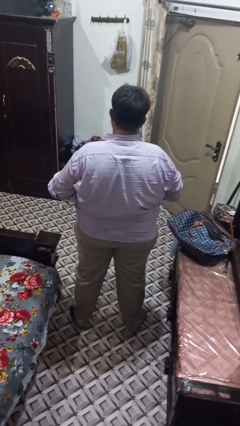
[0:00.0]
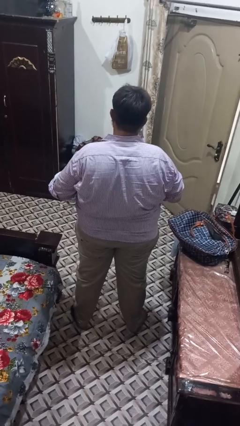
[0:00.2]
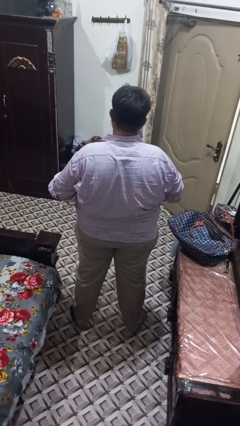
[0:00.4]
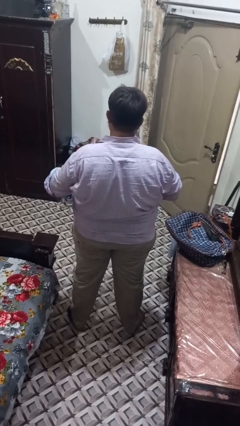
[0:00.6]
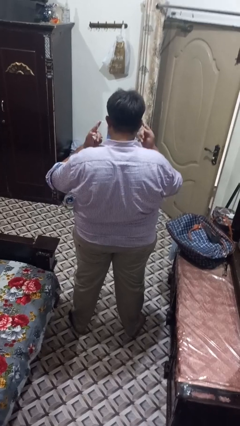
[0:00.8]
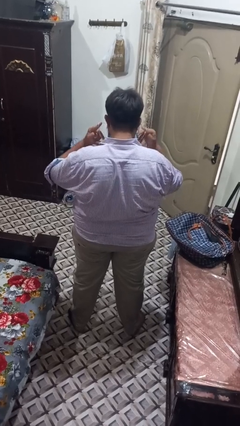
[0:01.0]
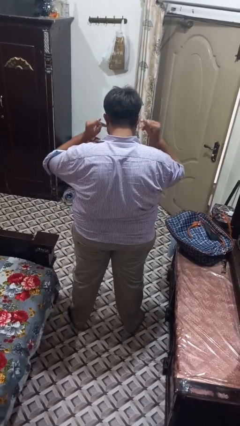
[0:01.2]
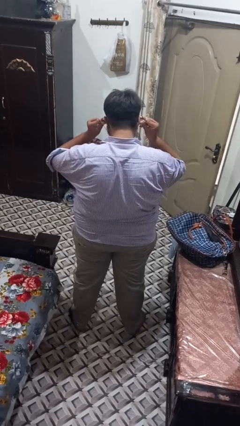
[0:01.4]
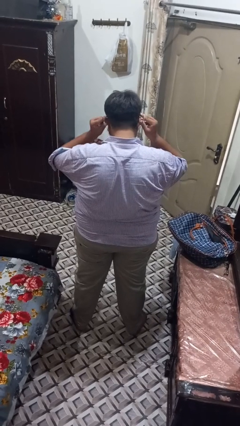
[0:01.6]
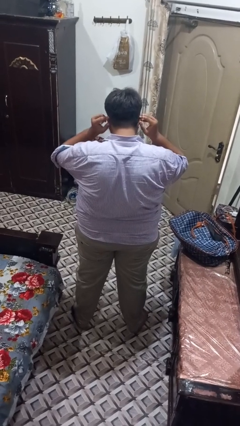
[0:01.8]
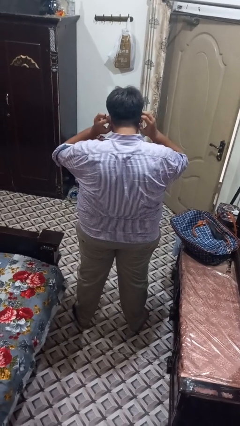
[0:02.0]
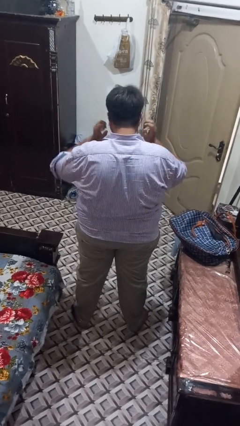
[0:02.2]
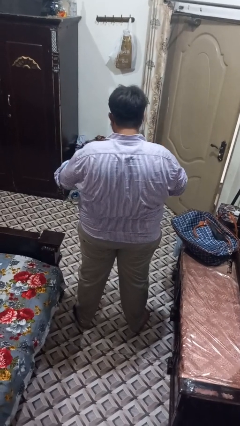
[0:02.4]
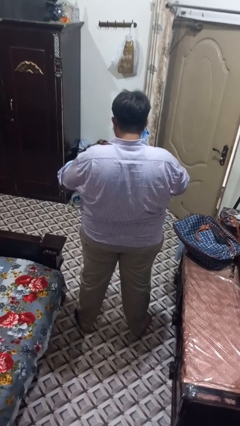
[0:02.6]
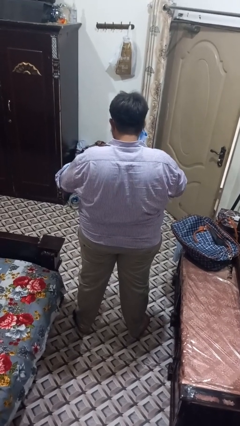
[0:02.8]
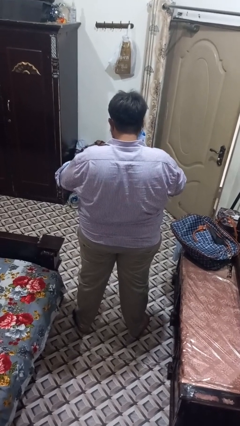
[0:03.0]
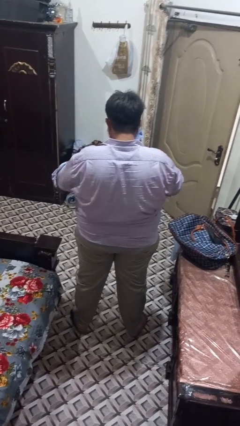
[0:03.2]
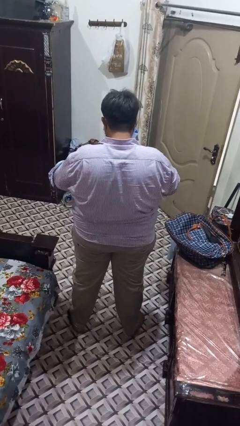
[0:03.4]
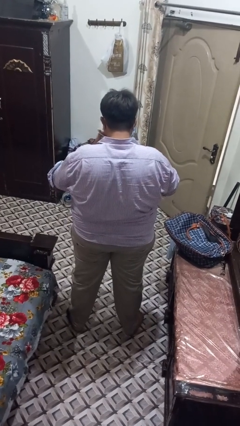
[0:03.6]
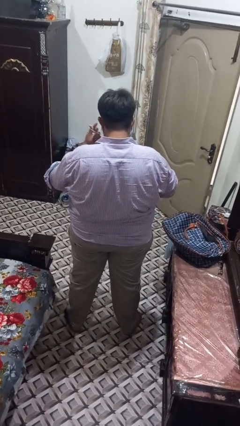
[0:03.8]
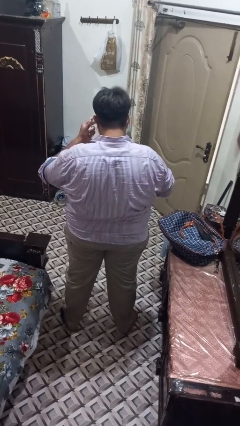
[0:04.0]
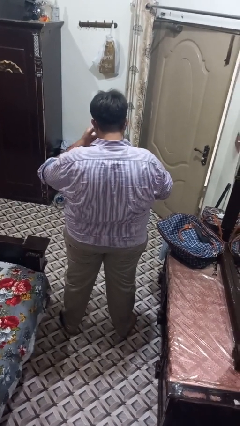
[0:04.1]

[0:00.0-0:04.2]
person puts on facemask

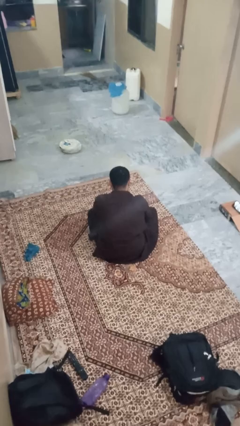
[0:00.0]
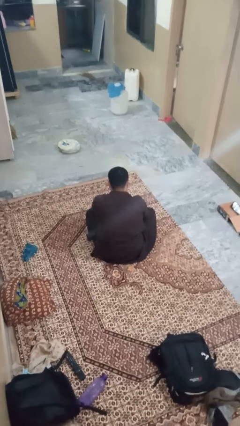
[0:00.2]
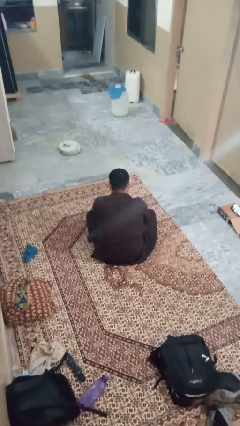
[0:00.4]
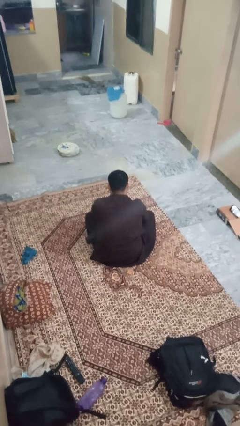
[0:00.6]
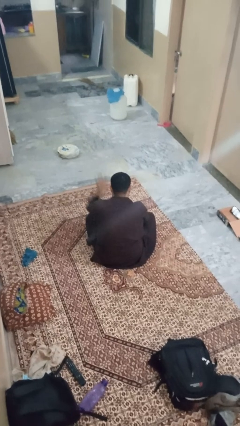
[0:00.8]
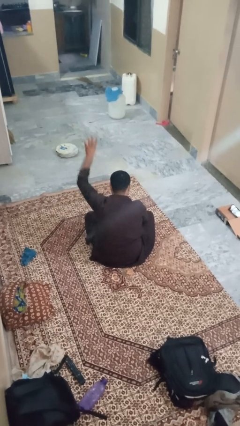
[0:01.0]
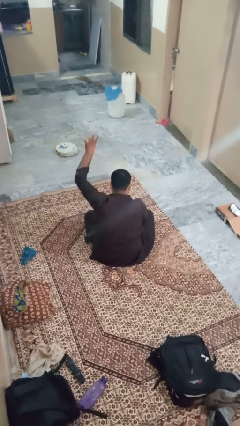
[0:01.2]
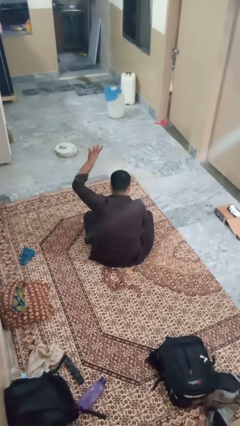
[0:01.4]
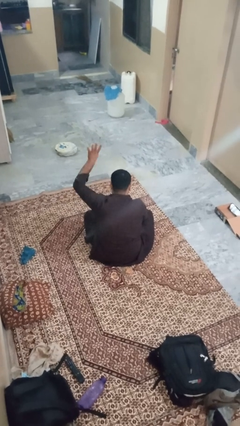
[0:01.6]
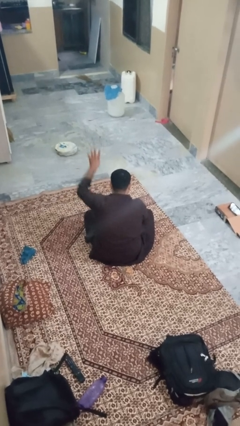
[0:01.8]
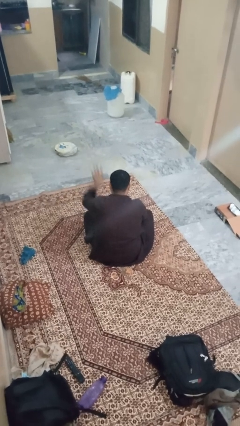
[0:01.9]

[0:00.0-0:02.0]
person gestures number four

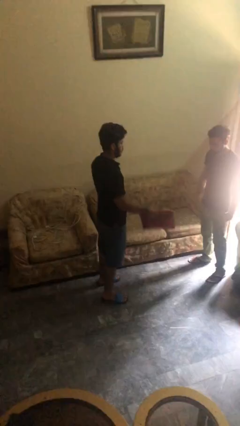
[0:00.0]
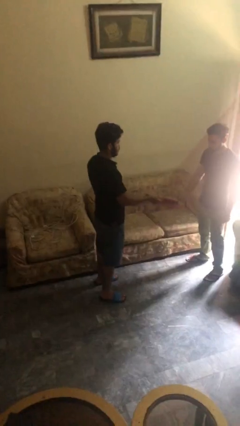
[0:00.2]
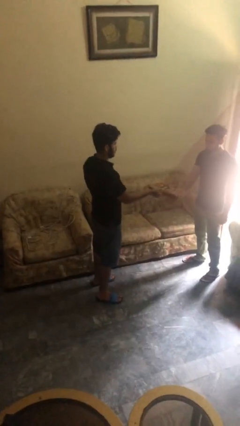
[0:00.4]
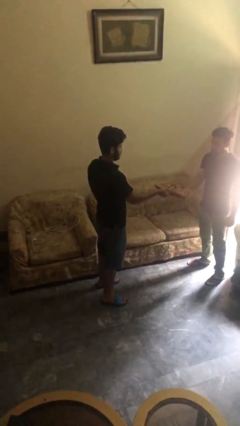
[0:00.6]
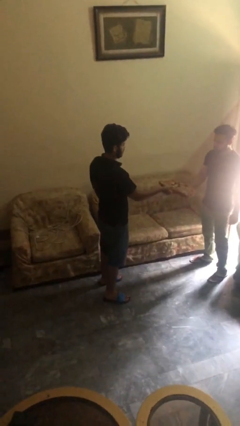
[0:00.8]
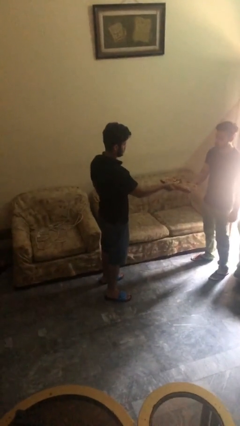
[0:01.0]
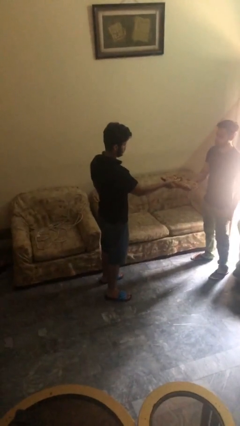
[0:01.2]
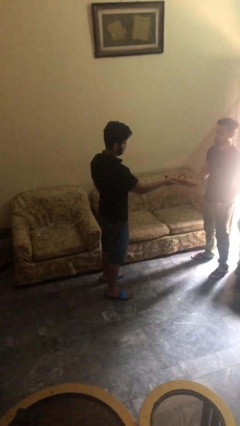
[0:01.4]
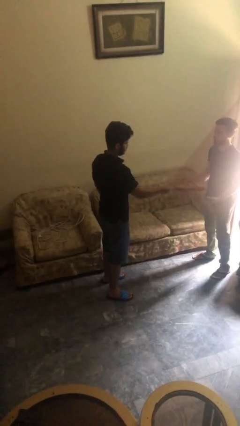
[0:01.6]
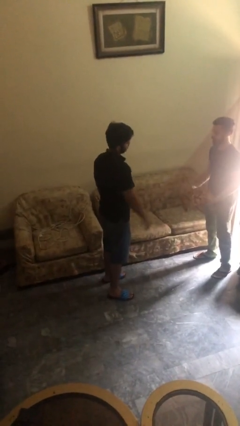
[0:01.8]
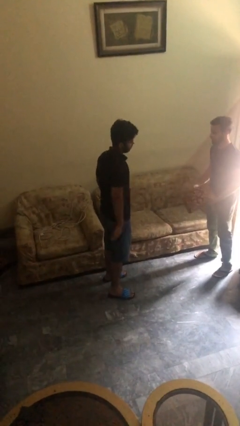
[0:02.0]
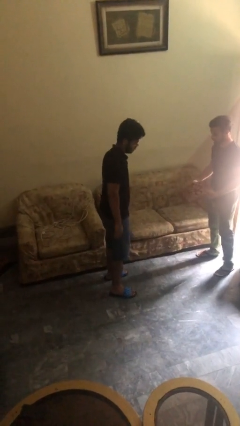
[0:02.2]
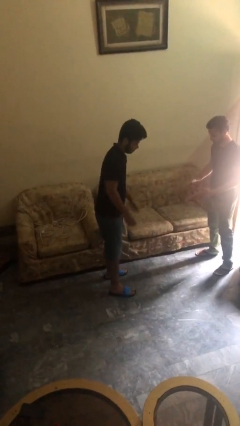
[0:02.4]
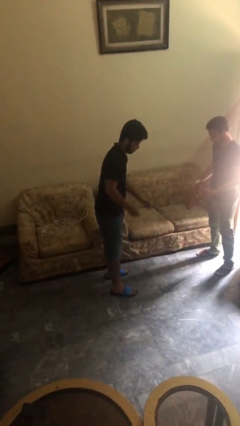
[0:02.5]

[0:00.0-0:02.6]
person transfers object to person

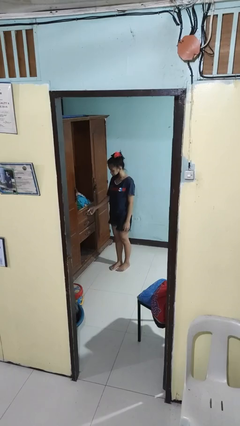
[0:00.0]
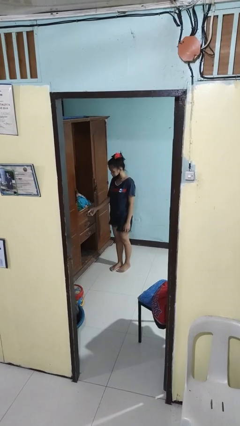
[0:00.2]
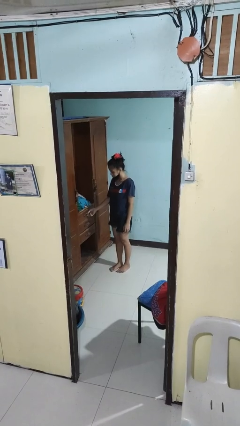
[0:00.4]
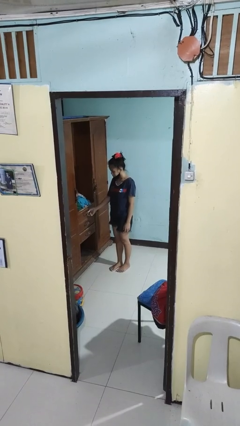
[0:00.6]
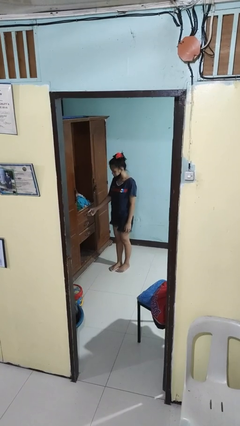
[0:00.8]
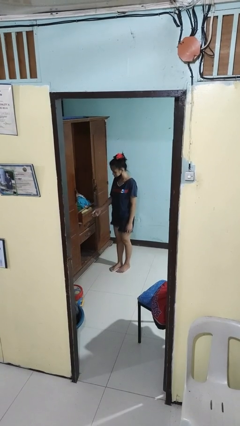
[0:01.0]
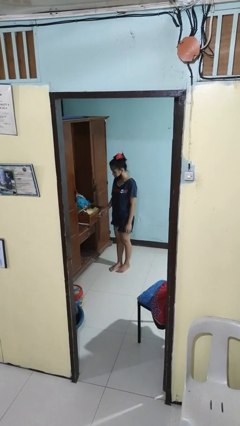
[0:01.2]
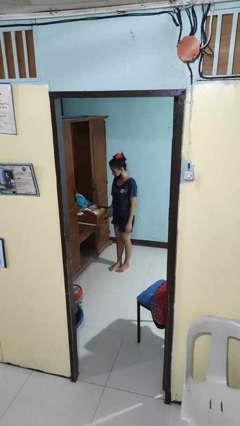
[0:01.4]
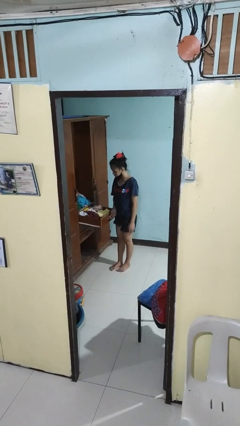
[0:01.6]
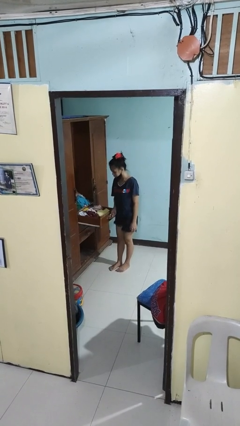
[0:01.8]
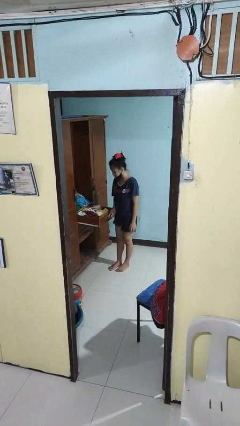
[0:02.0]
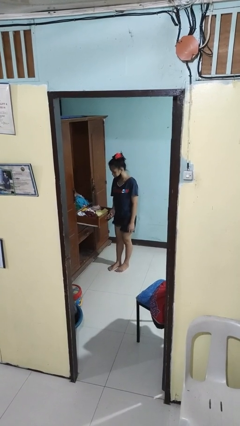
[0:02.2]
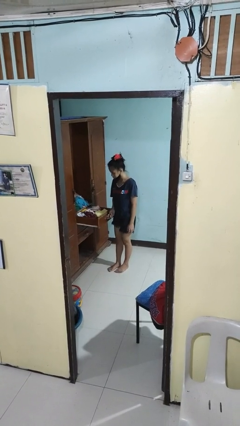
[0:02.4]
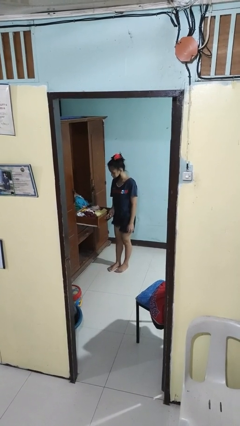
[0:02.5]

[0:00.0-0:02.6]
person opens dresser drawer

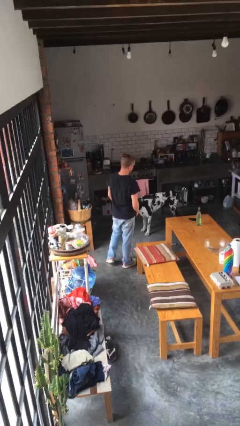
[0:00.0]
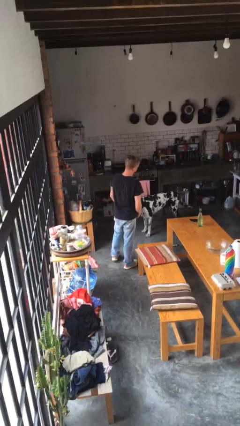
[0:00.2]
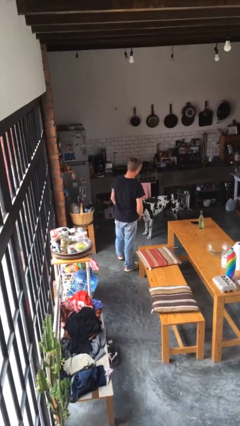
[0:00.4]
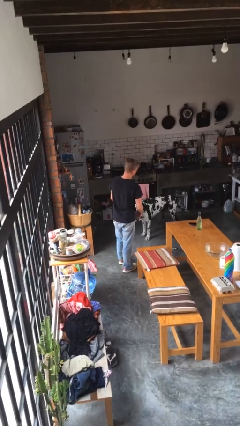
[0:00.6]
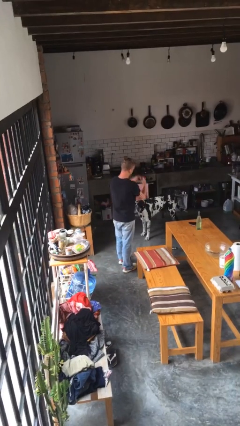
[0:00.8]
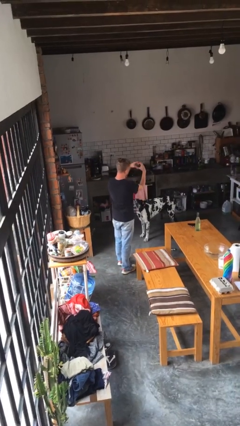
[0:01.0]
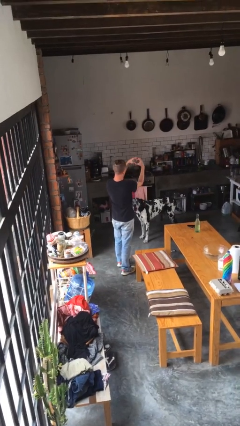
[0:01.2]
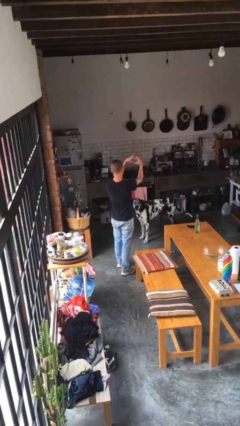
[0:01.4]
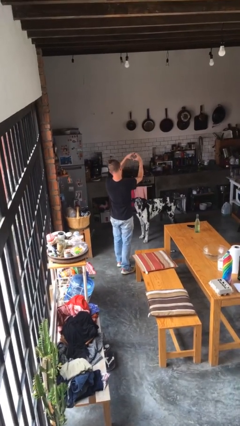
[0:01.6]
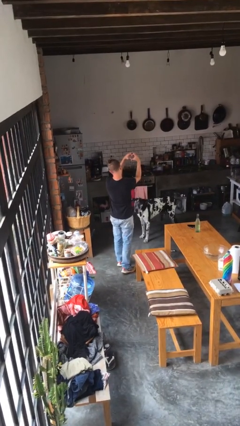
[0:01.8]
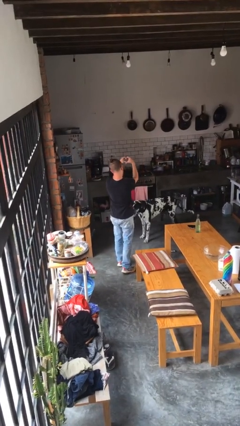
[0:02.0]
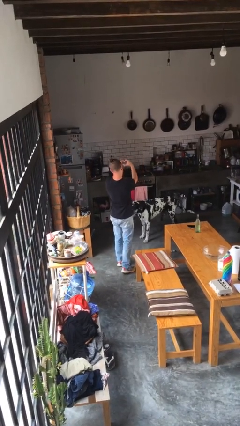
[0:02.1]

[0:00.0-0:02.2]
person gestures heart

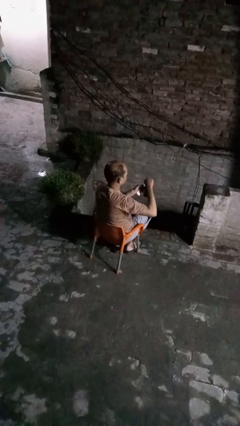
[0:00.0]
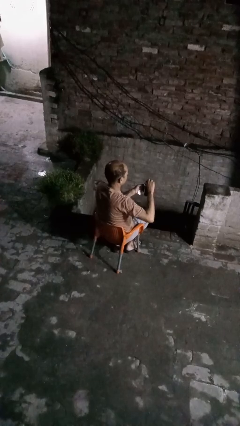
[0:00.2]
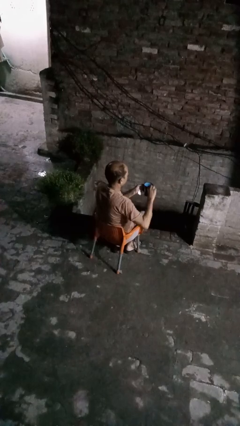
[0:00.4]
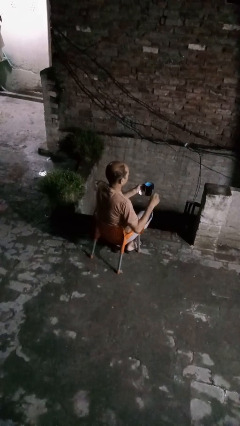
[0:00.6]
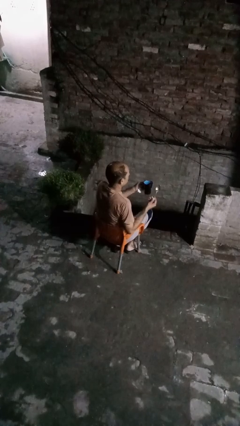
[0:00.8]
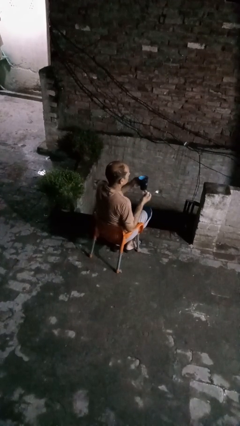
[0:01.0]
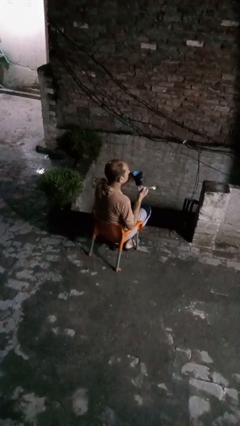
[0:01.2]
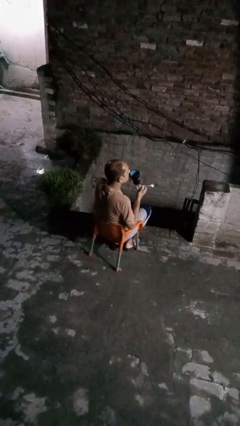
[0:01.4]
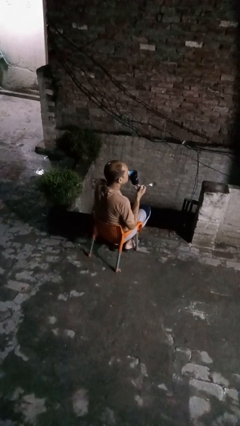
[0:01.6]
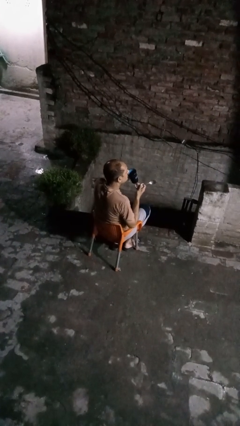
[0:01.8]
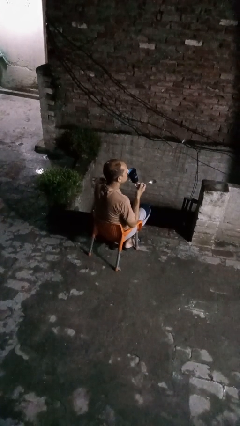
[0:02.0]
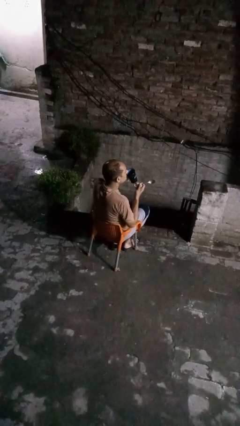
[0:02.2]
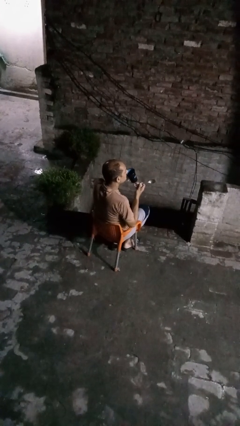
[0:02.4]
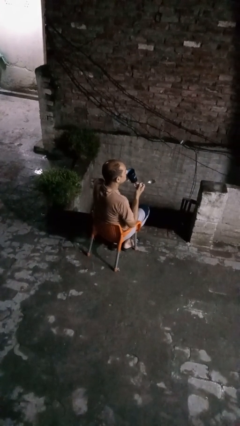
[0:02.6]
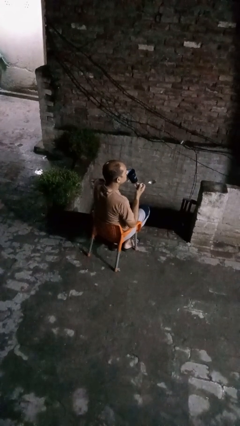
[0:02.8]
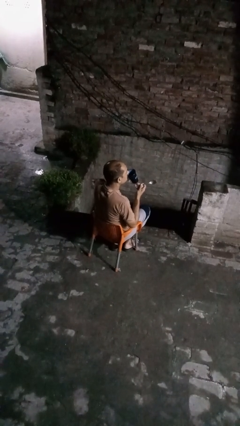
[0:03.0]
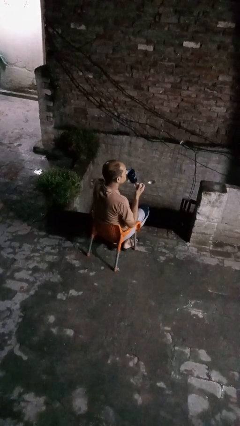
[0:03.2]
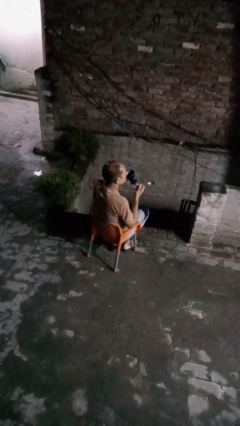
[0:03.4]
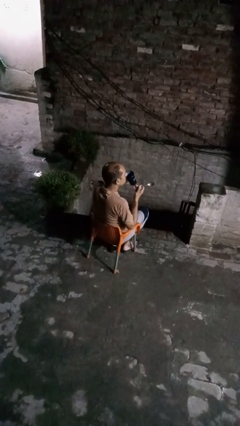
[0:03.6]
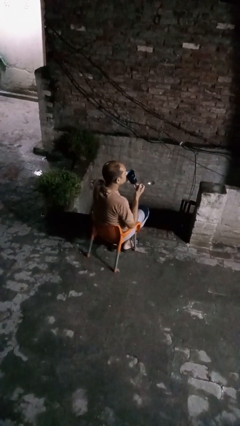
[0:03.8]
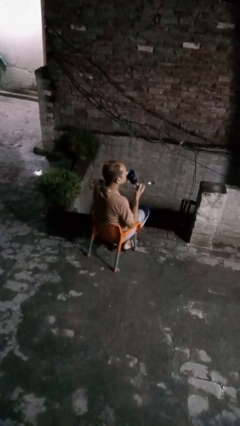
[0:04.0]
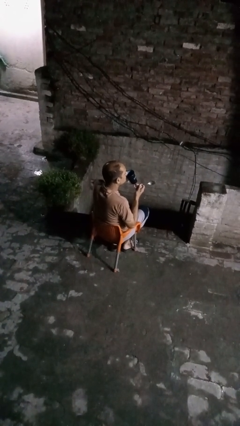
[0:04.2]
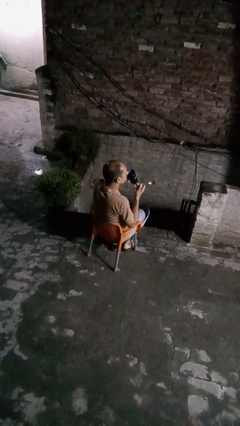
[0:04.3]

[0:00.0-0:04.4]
person drinks from mug
